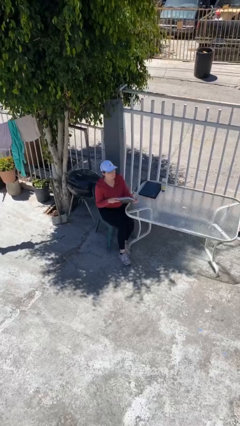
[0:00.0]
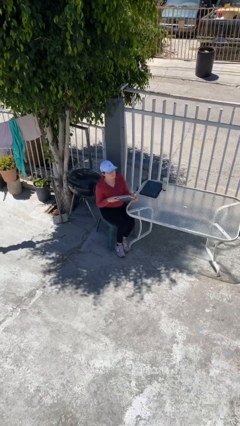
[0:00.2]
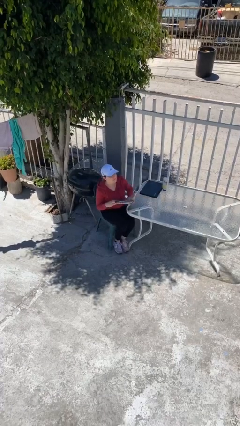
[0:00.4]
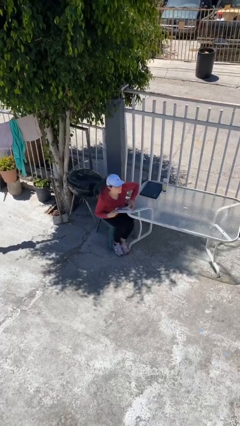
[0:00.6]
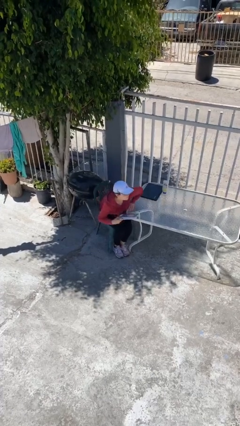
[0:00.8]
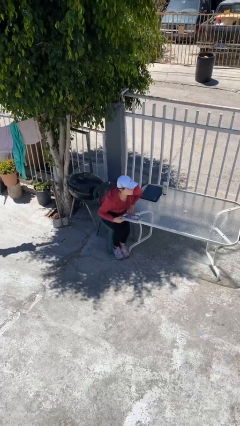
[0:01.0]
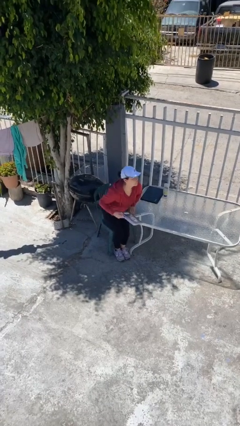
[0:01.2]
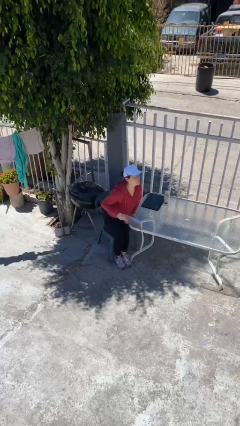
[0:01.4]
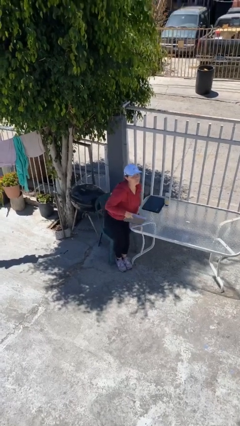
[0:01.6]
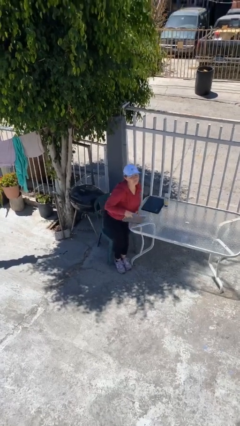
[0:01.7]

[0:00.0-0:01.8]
person stands up

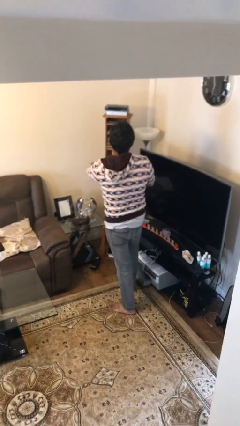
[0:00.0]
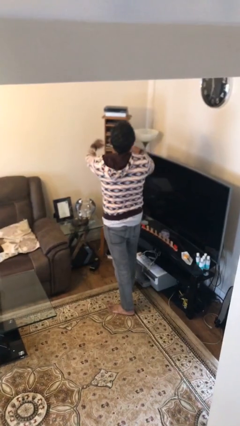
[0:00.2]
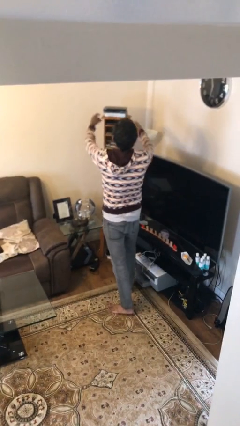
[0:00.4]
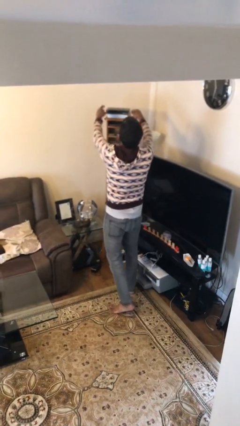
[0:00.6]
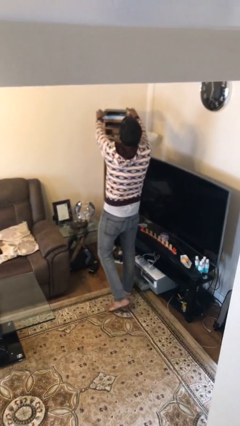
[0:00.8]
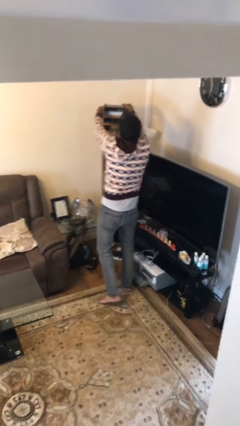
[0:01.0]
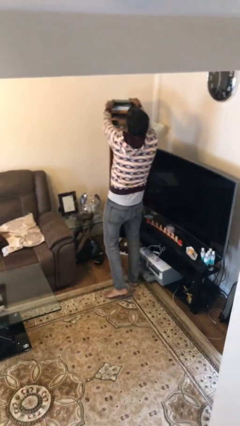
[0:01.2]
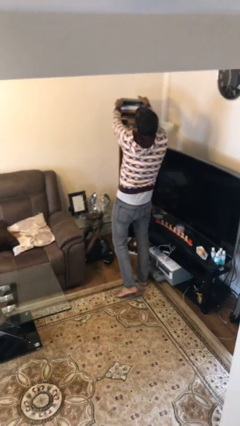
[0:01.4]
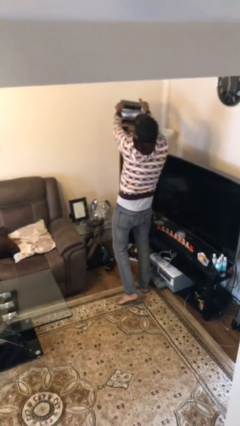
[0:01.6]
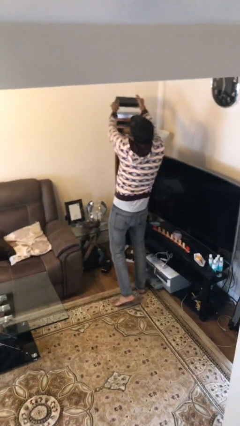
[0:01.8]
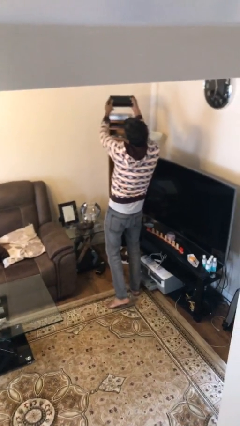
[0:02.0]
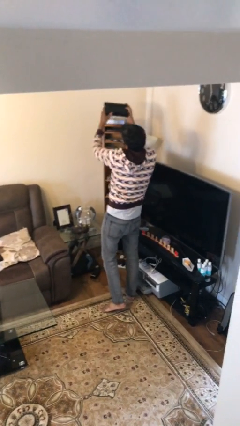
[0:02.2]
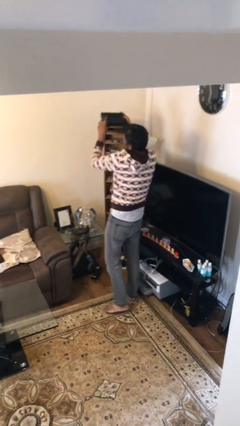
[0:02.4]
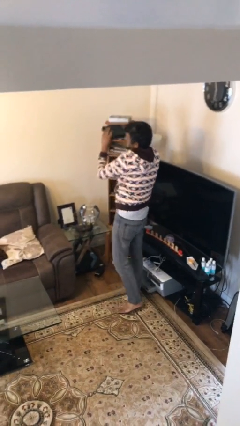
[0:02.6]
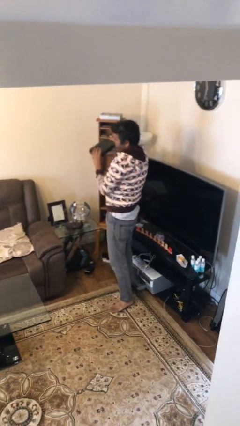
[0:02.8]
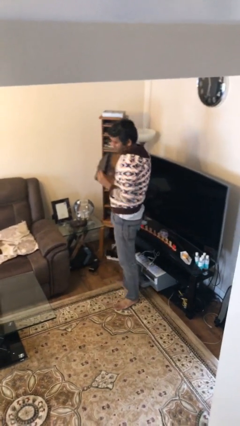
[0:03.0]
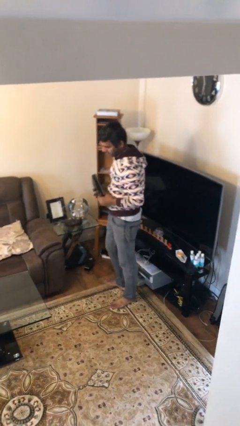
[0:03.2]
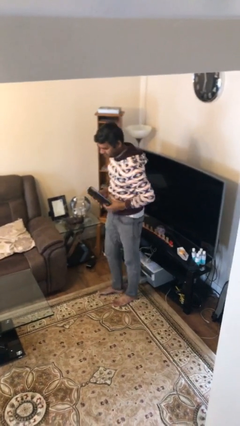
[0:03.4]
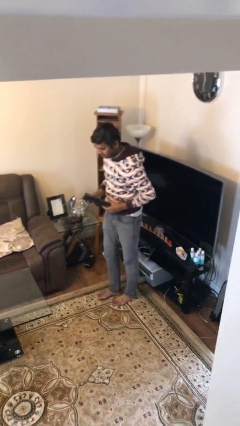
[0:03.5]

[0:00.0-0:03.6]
person picks up object from shelf

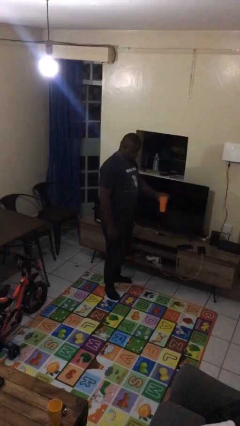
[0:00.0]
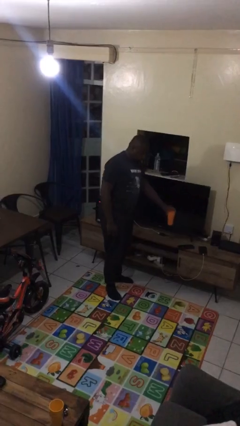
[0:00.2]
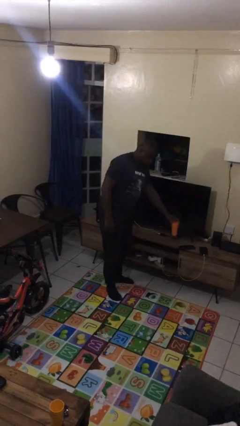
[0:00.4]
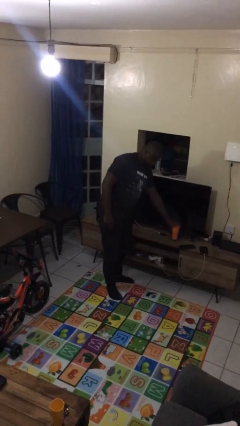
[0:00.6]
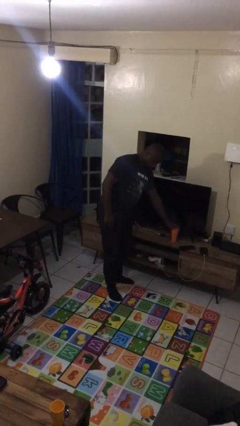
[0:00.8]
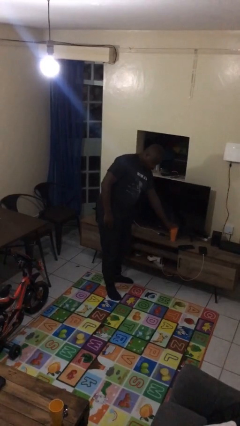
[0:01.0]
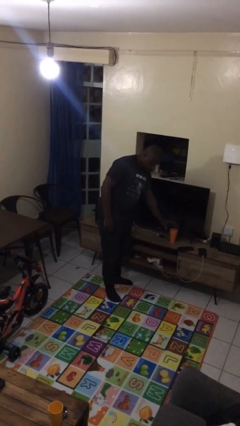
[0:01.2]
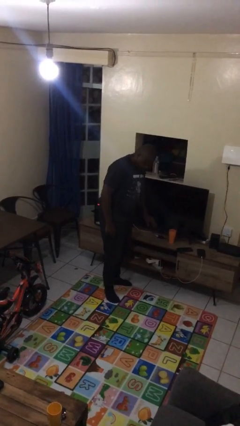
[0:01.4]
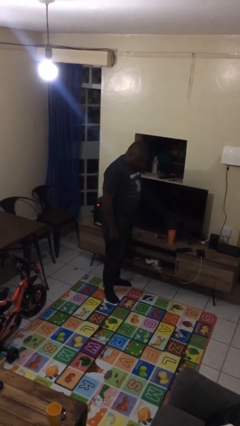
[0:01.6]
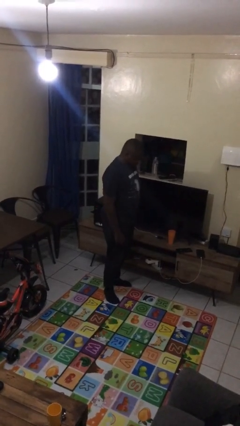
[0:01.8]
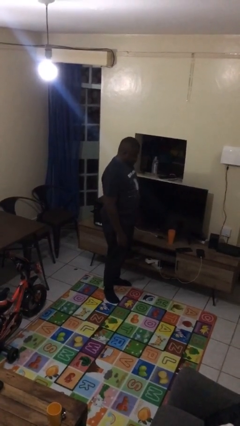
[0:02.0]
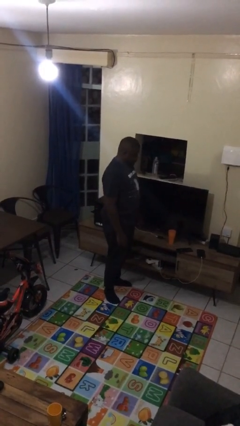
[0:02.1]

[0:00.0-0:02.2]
person puts down object on countertop

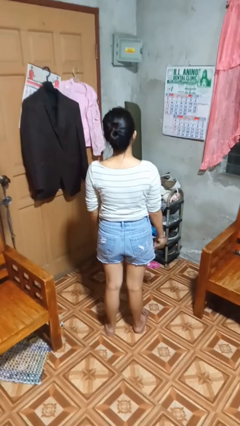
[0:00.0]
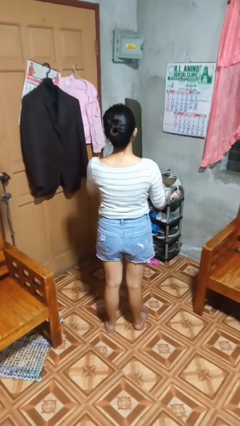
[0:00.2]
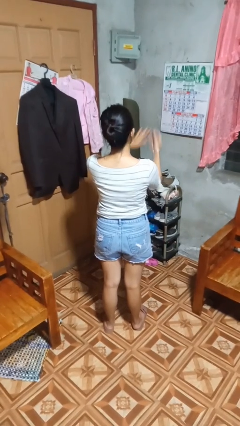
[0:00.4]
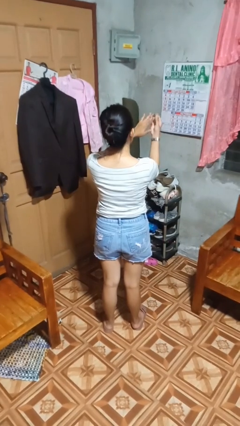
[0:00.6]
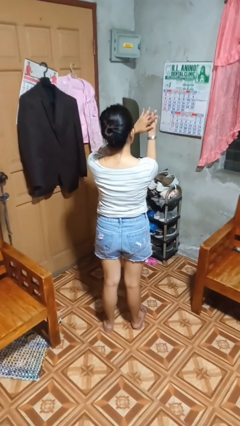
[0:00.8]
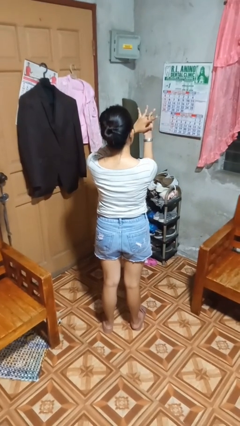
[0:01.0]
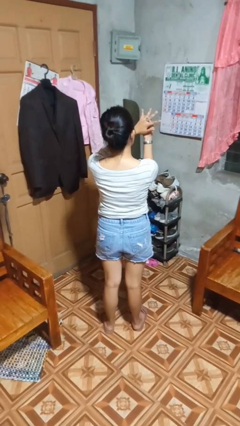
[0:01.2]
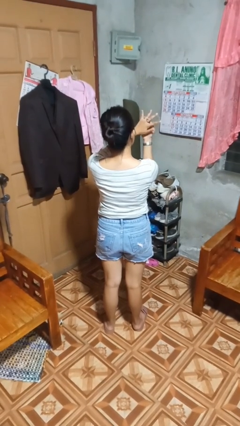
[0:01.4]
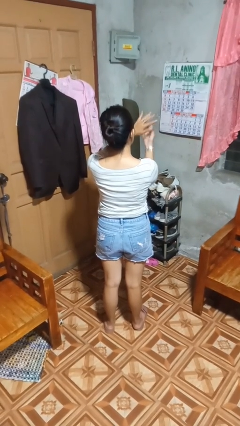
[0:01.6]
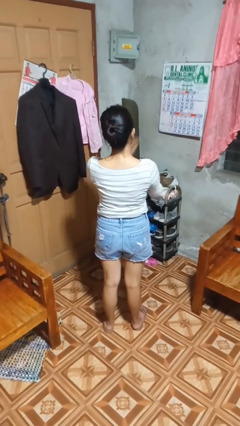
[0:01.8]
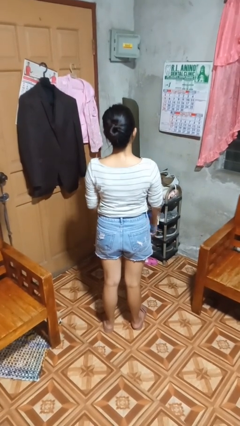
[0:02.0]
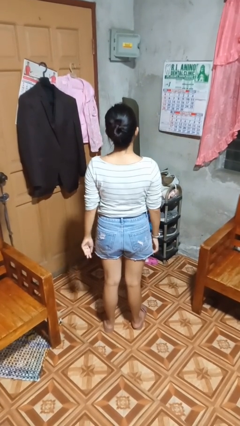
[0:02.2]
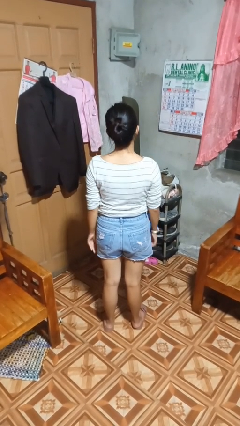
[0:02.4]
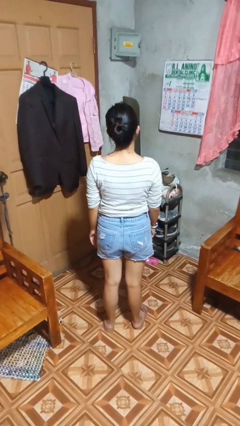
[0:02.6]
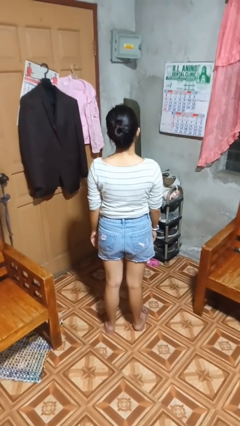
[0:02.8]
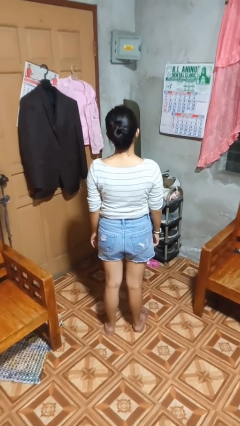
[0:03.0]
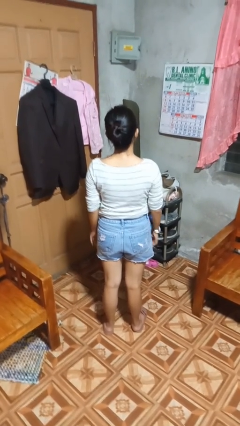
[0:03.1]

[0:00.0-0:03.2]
person puts on ring

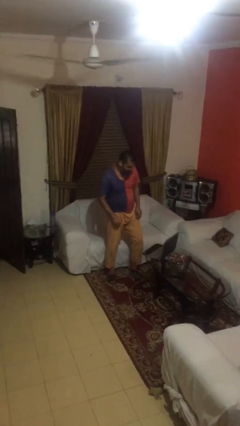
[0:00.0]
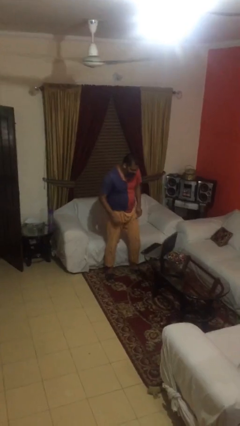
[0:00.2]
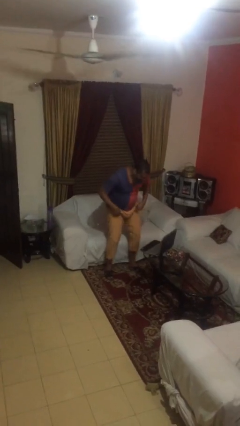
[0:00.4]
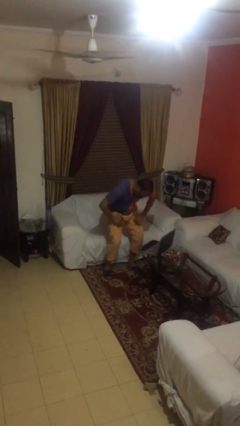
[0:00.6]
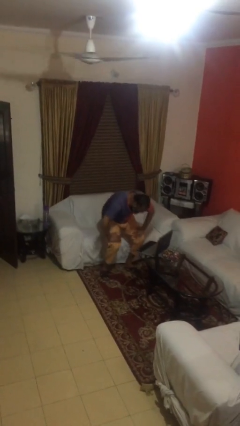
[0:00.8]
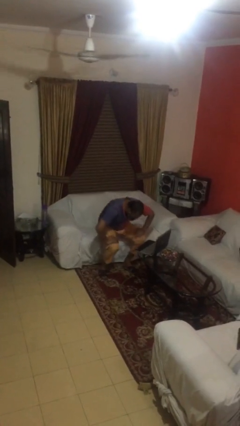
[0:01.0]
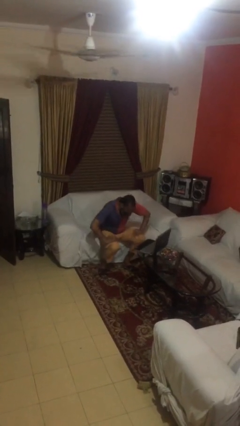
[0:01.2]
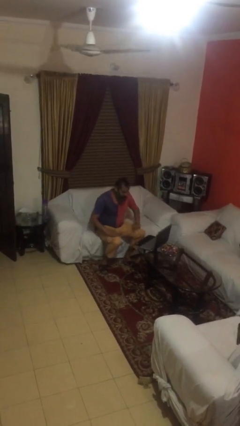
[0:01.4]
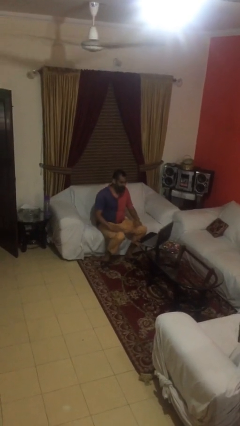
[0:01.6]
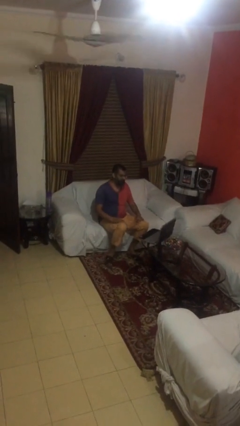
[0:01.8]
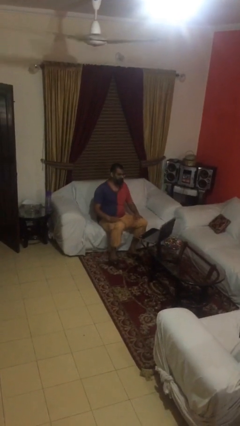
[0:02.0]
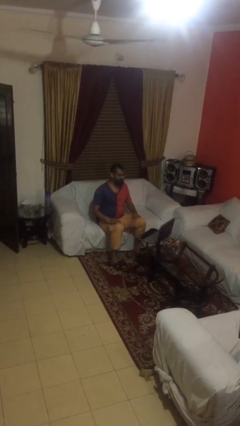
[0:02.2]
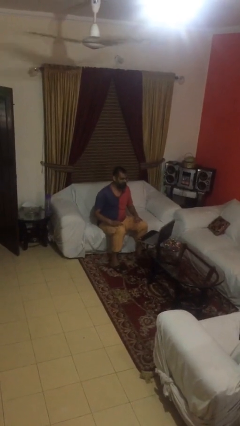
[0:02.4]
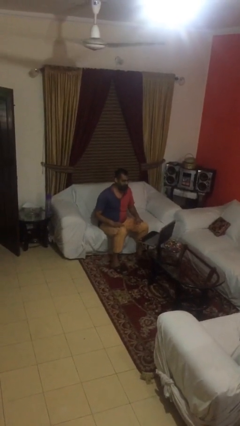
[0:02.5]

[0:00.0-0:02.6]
person sits down

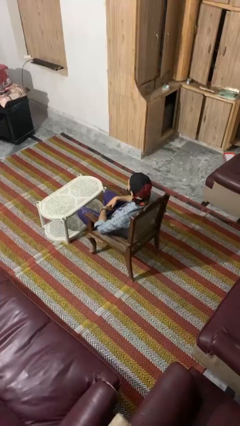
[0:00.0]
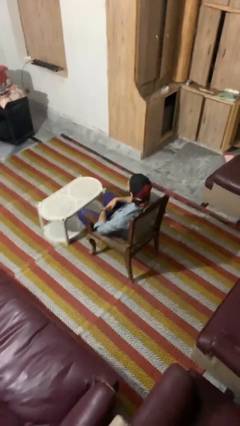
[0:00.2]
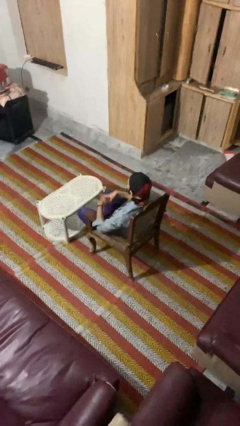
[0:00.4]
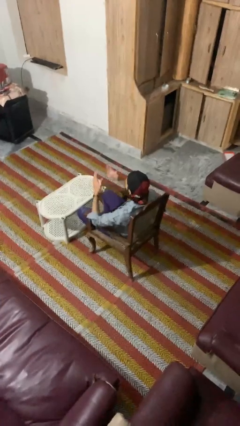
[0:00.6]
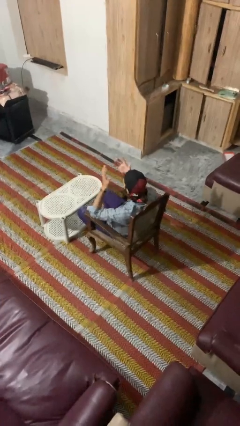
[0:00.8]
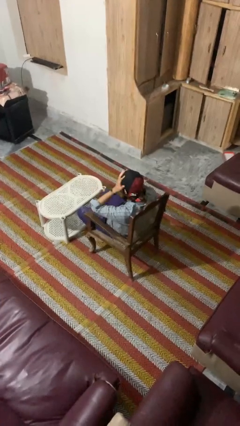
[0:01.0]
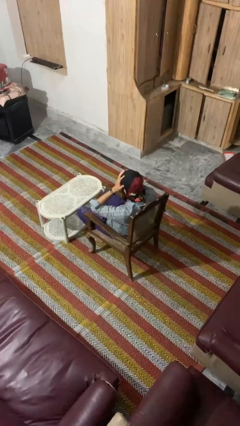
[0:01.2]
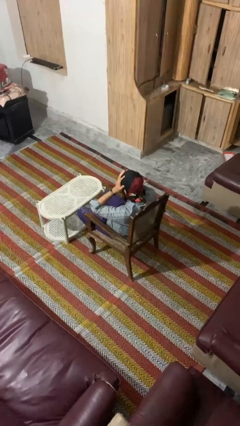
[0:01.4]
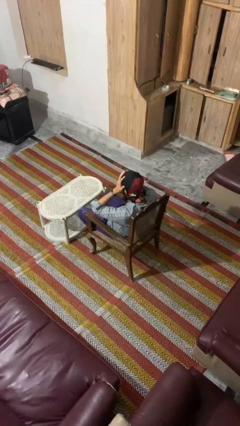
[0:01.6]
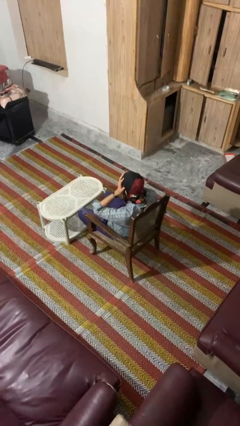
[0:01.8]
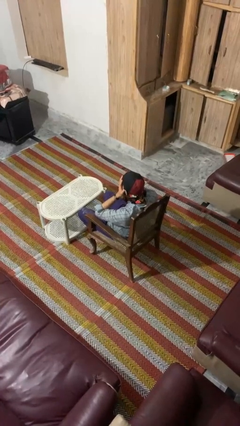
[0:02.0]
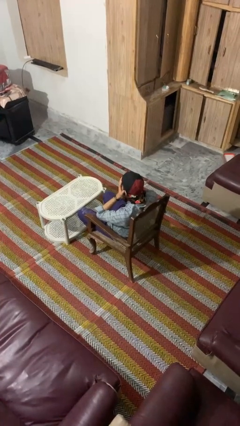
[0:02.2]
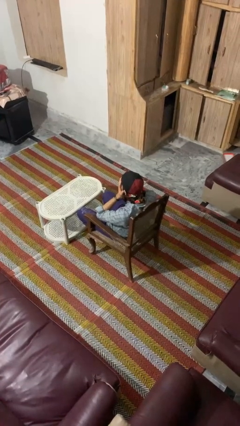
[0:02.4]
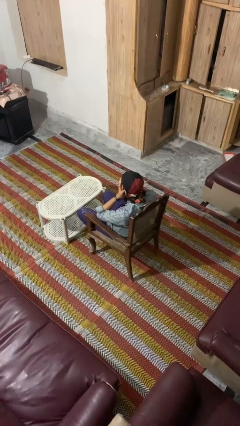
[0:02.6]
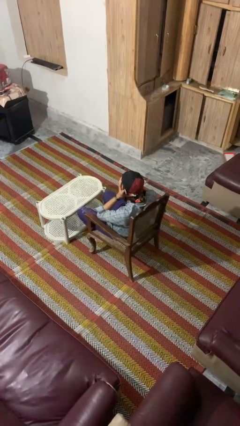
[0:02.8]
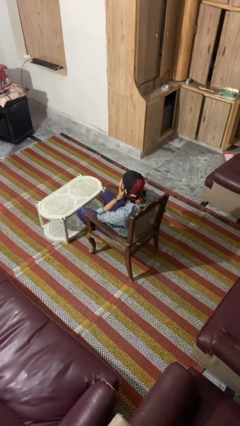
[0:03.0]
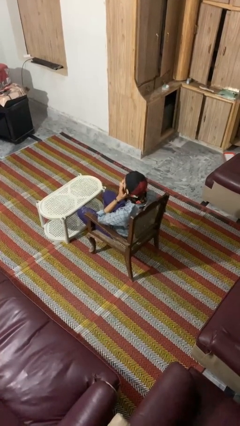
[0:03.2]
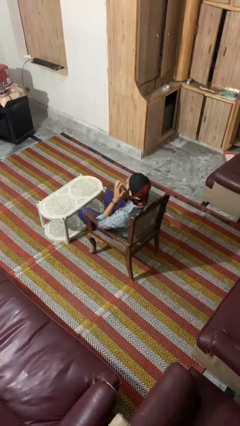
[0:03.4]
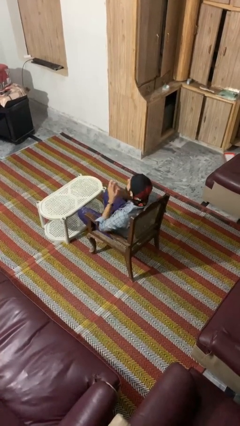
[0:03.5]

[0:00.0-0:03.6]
person covers face with hands

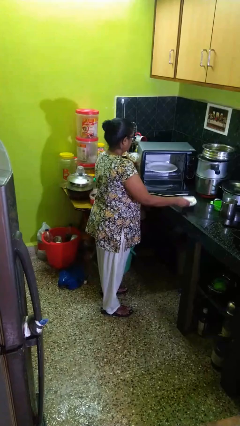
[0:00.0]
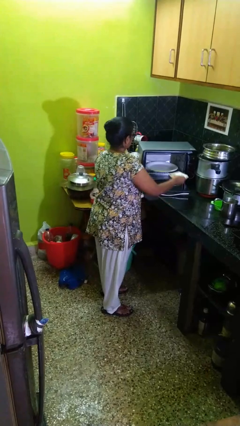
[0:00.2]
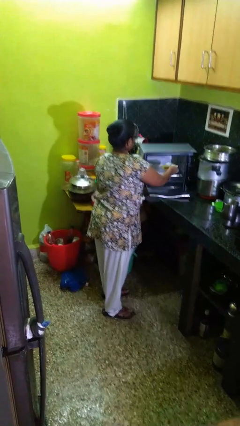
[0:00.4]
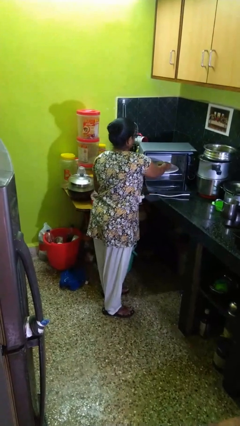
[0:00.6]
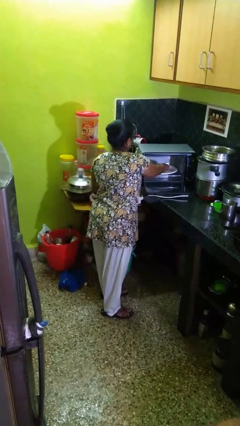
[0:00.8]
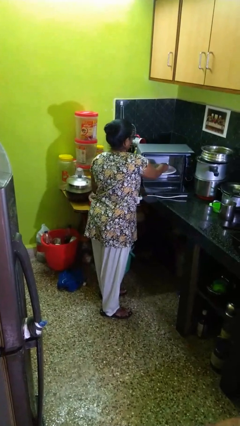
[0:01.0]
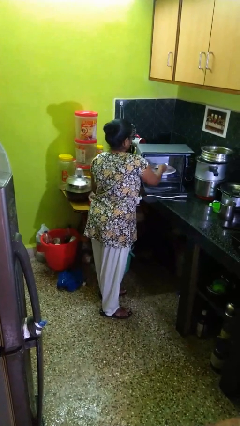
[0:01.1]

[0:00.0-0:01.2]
person puts object into microwave
